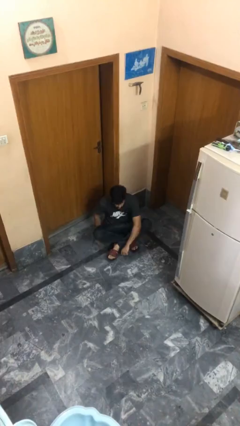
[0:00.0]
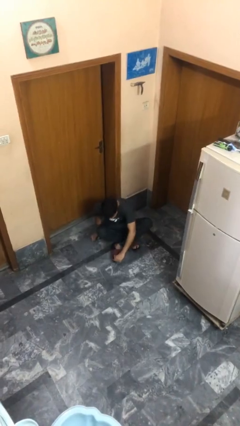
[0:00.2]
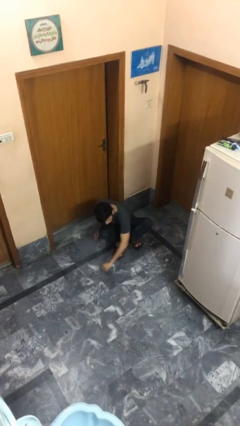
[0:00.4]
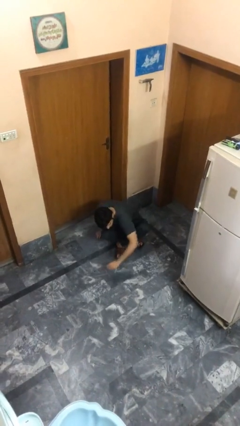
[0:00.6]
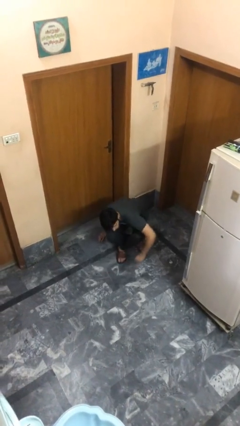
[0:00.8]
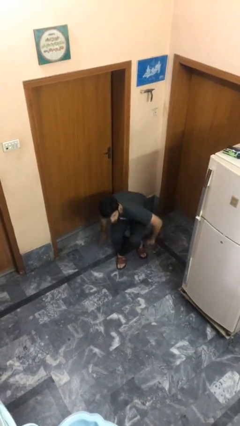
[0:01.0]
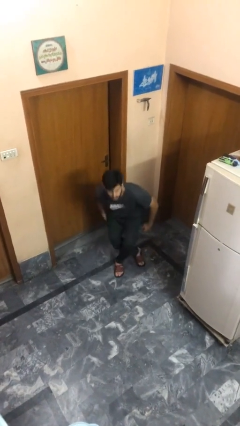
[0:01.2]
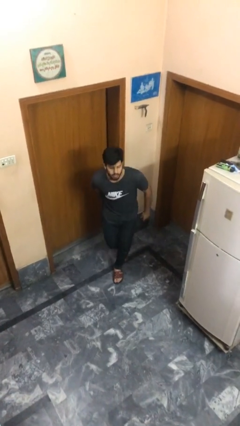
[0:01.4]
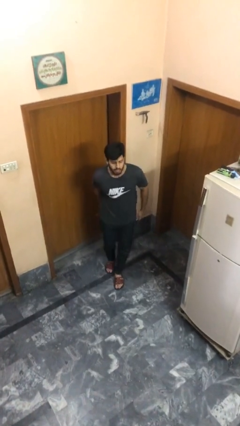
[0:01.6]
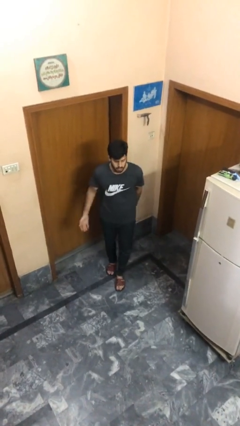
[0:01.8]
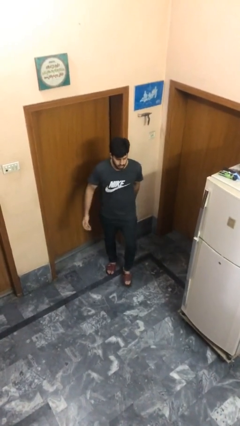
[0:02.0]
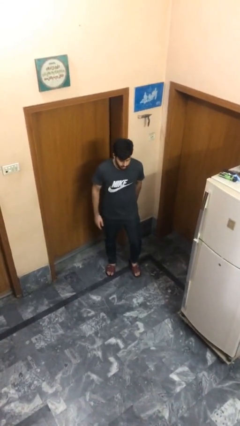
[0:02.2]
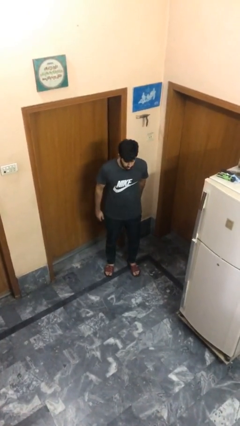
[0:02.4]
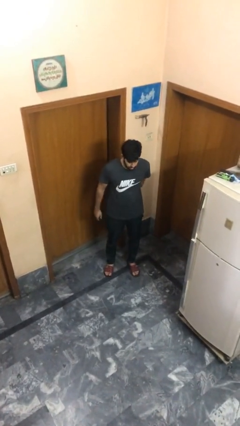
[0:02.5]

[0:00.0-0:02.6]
person stands up from floor

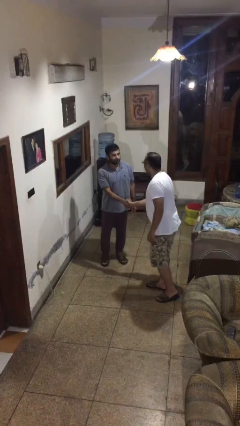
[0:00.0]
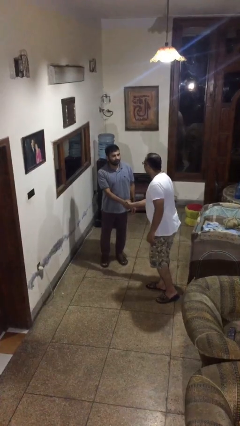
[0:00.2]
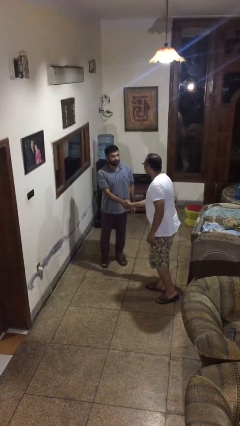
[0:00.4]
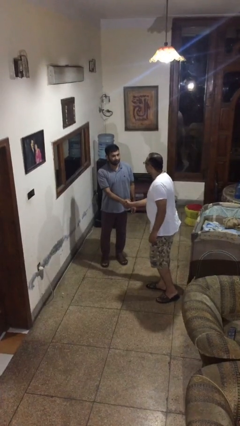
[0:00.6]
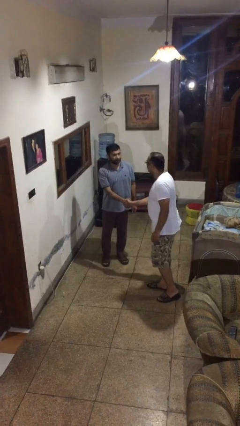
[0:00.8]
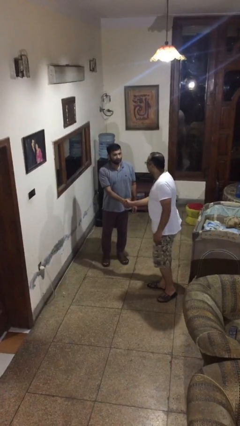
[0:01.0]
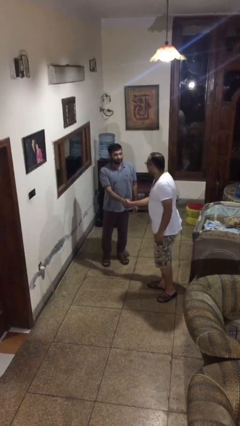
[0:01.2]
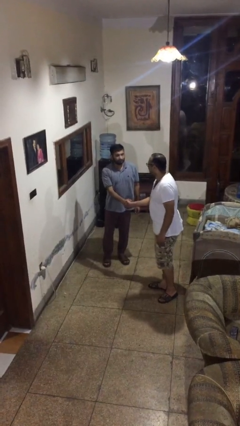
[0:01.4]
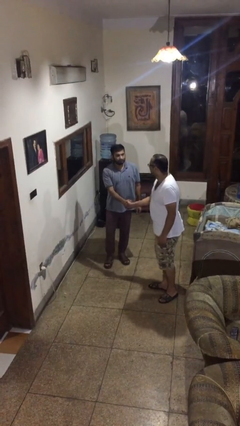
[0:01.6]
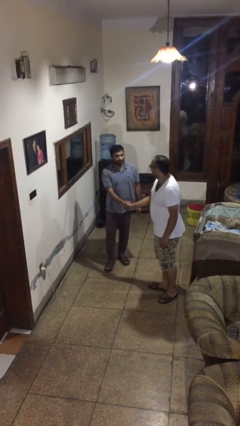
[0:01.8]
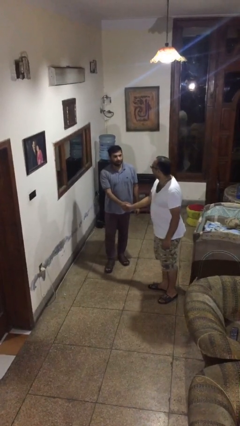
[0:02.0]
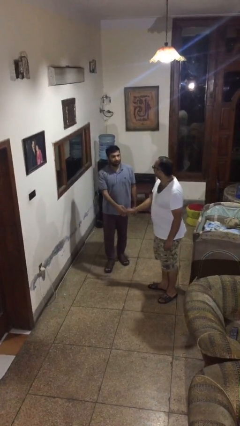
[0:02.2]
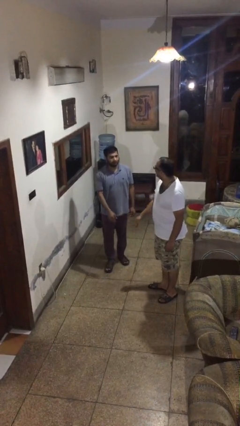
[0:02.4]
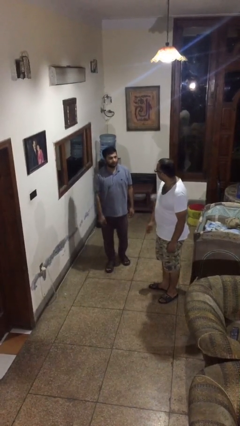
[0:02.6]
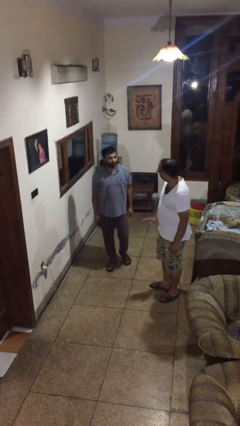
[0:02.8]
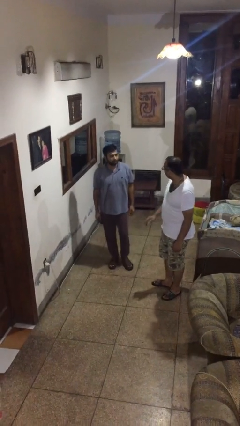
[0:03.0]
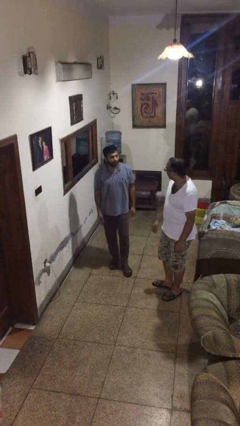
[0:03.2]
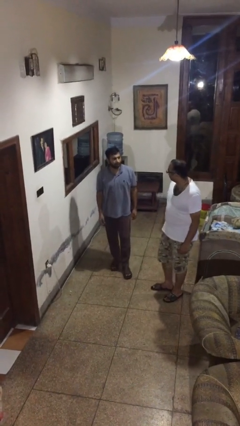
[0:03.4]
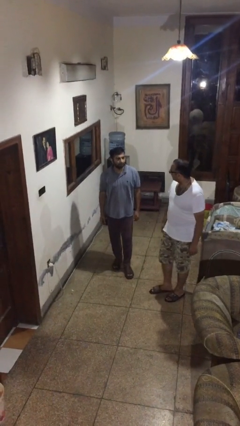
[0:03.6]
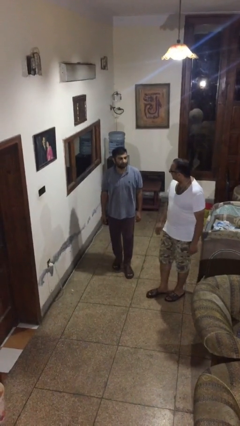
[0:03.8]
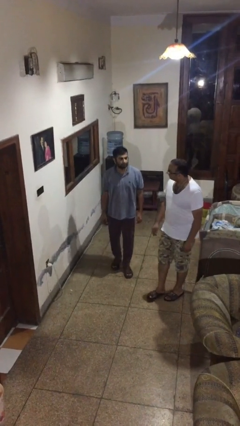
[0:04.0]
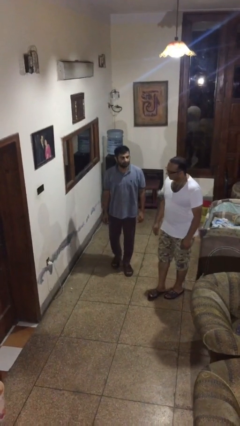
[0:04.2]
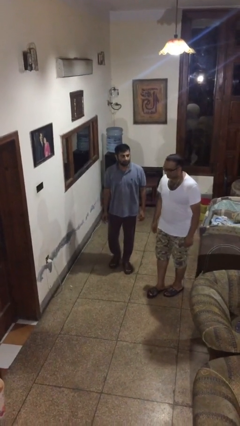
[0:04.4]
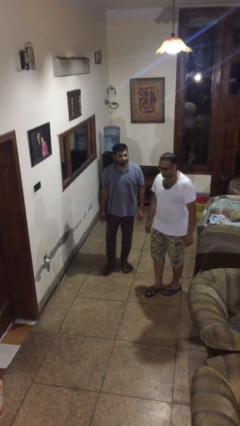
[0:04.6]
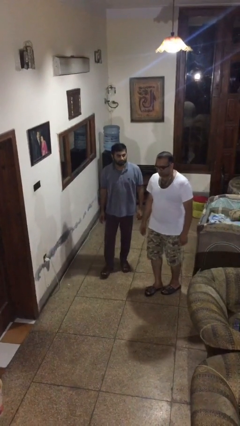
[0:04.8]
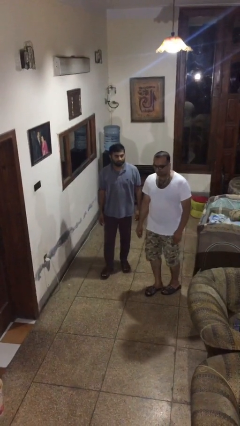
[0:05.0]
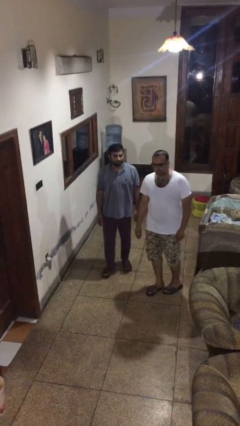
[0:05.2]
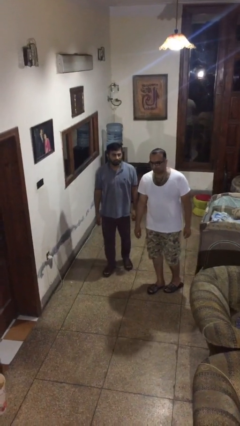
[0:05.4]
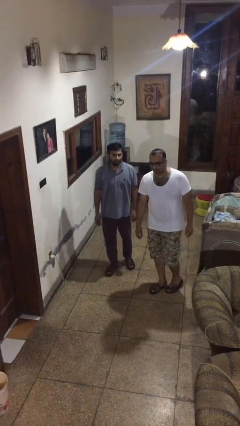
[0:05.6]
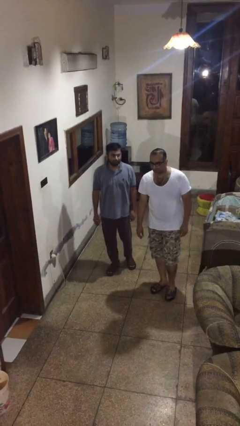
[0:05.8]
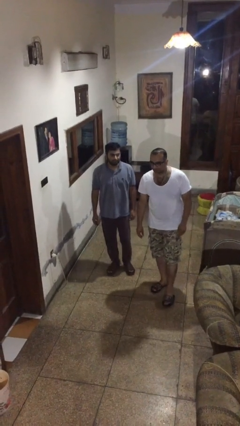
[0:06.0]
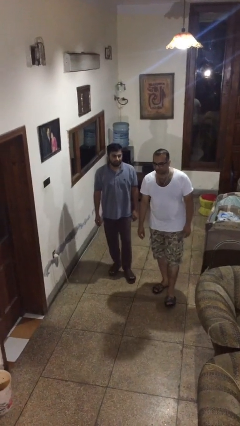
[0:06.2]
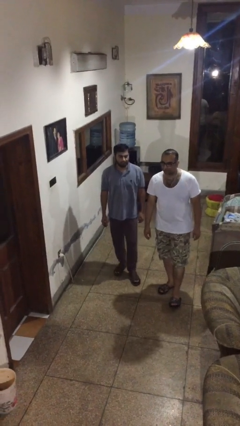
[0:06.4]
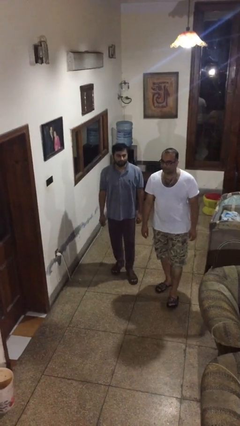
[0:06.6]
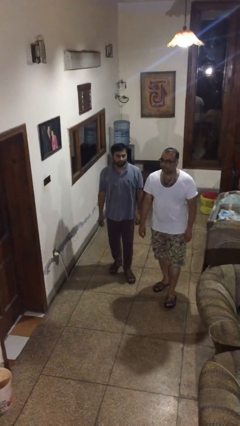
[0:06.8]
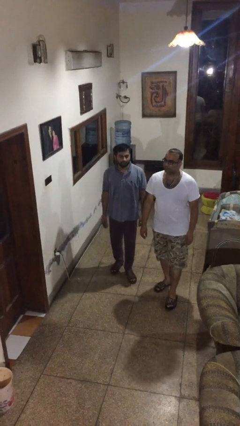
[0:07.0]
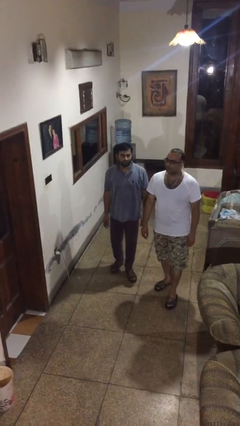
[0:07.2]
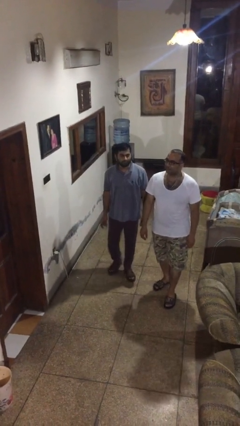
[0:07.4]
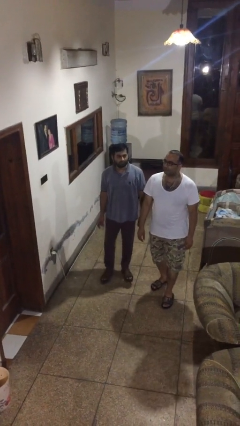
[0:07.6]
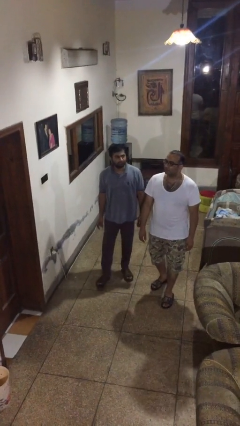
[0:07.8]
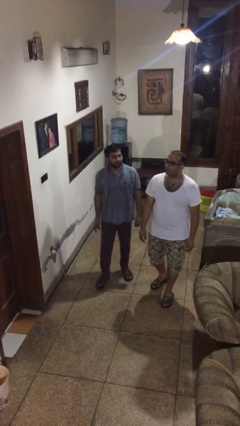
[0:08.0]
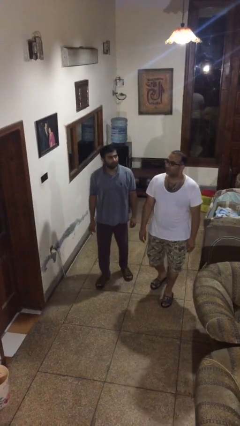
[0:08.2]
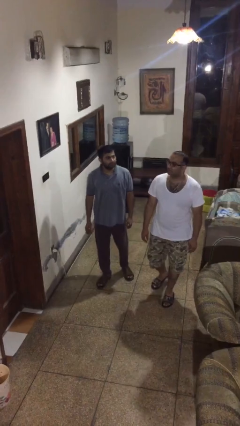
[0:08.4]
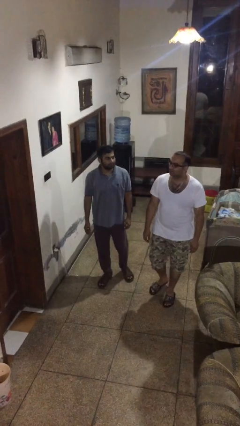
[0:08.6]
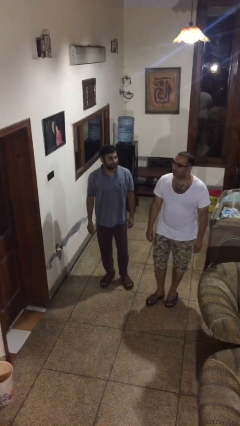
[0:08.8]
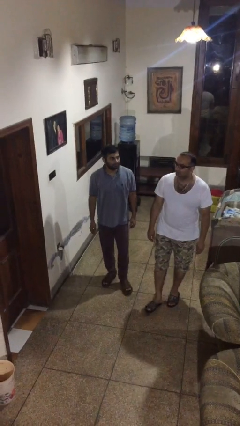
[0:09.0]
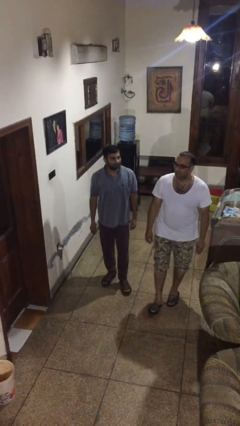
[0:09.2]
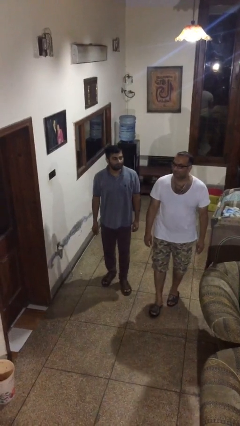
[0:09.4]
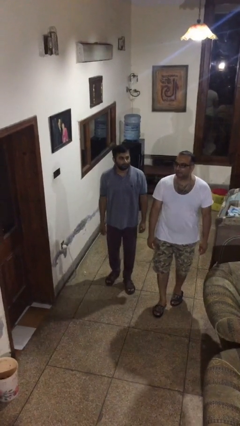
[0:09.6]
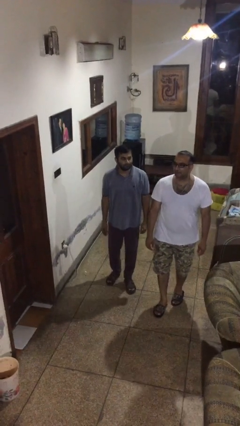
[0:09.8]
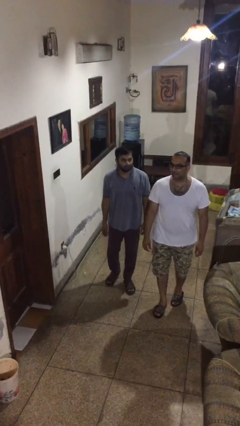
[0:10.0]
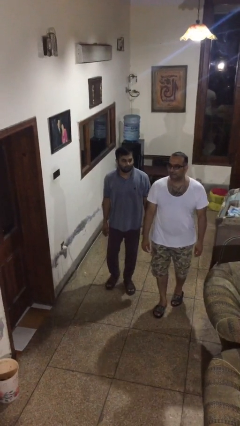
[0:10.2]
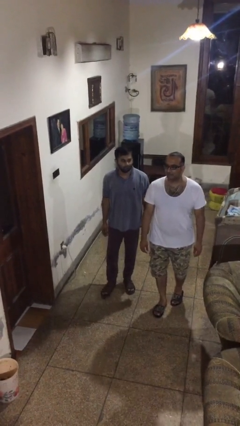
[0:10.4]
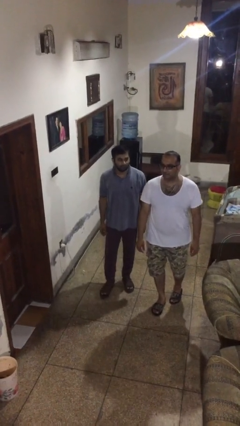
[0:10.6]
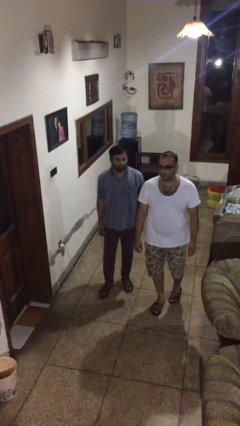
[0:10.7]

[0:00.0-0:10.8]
person talks to person

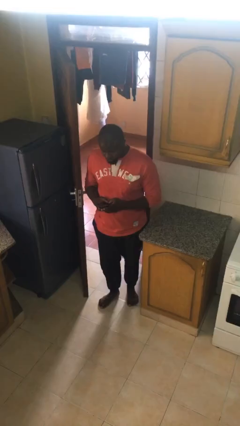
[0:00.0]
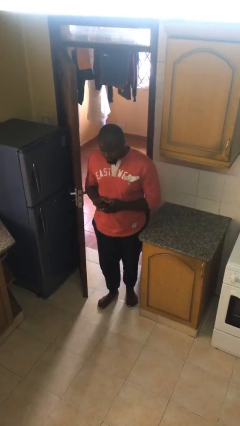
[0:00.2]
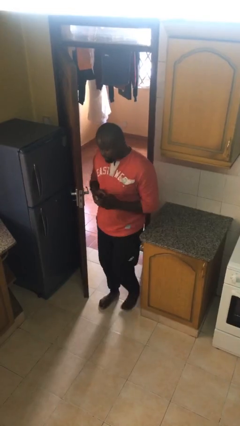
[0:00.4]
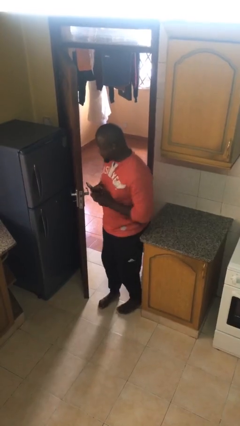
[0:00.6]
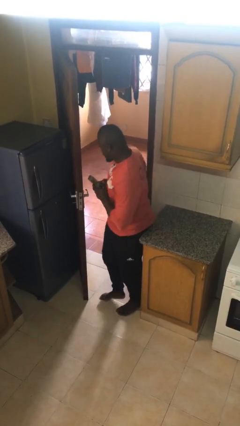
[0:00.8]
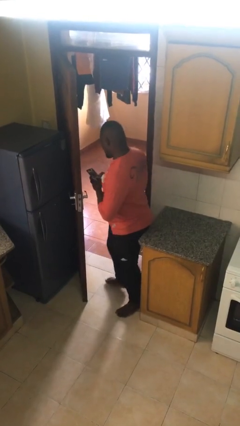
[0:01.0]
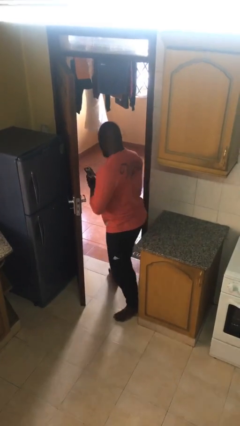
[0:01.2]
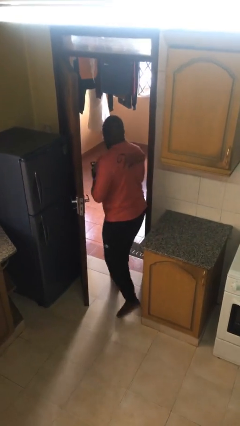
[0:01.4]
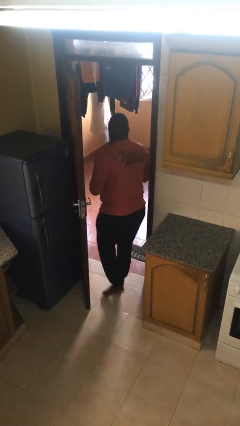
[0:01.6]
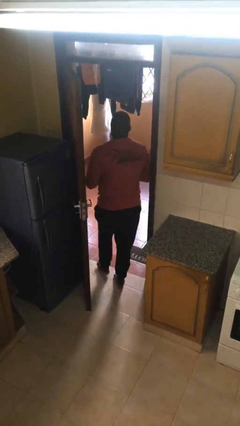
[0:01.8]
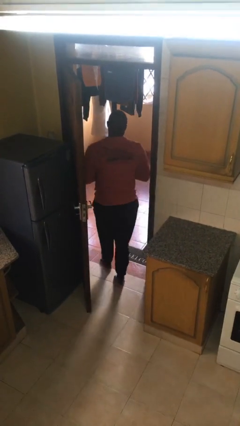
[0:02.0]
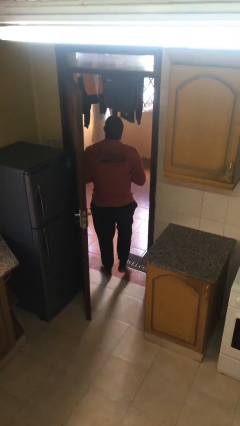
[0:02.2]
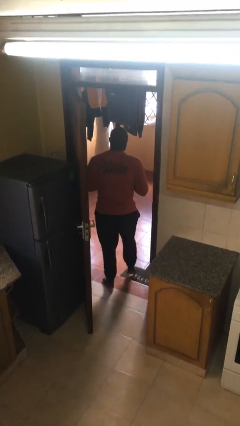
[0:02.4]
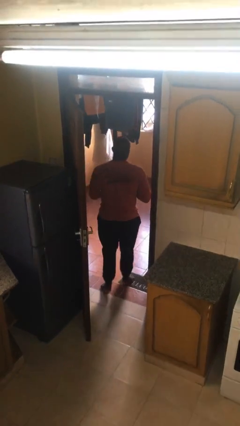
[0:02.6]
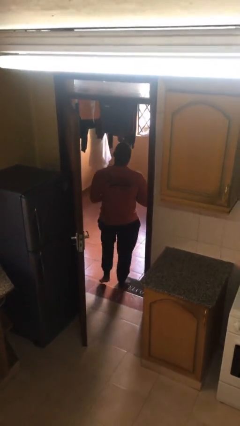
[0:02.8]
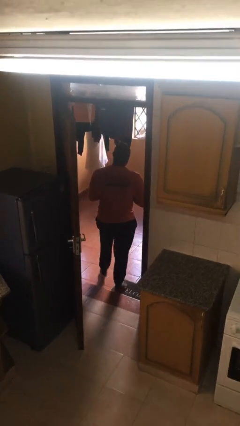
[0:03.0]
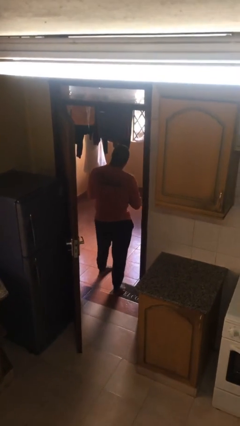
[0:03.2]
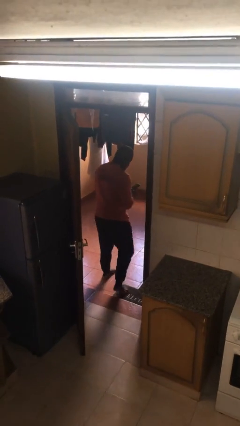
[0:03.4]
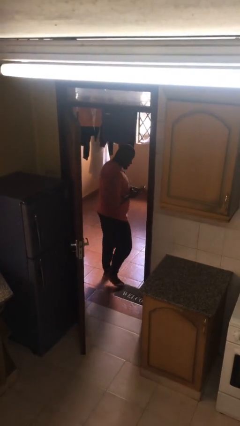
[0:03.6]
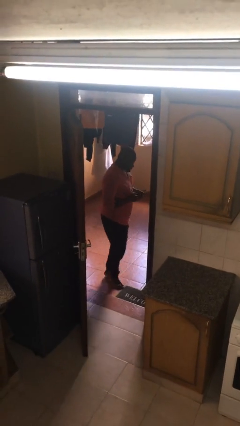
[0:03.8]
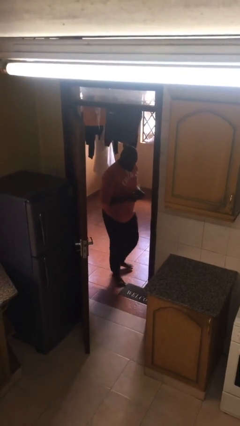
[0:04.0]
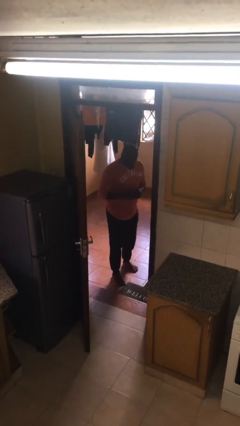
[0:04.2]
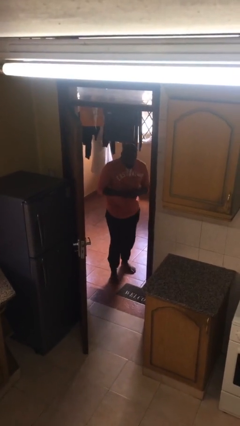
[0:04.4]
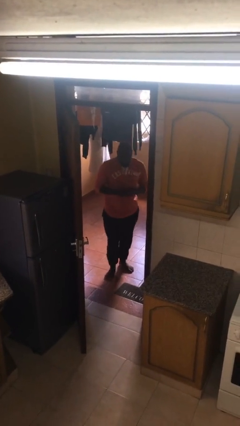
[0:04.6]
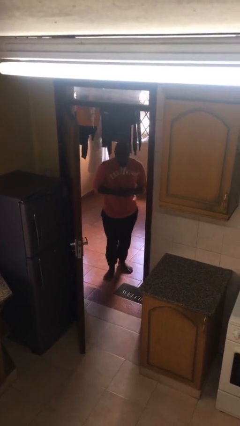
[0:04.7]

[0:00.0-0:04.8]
person exits scene through structure
